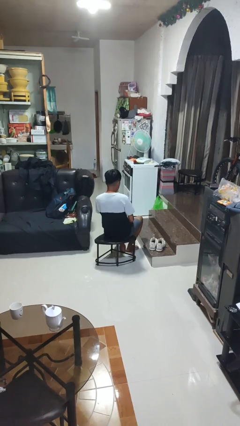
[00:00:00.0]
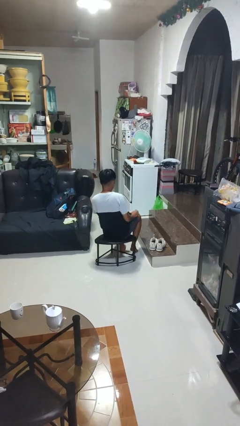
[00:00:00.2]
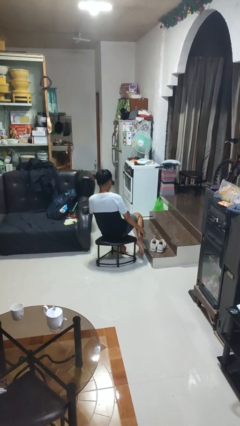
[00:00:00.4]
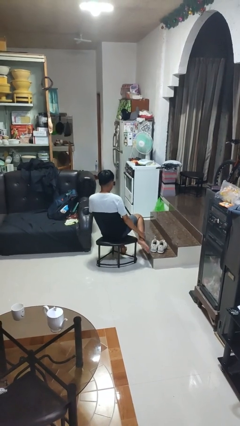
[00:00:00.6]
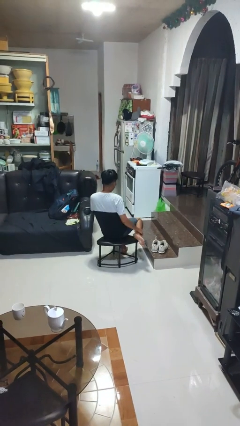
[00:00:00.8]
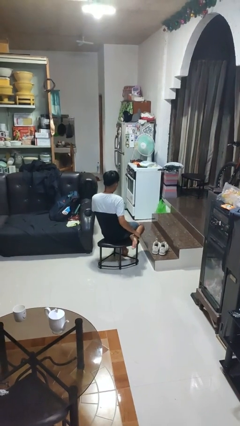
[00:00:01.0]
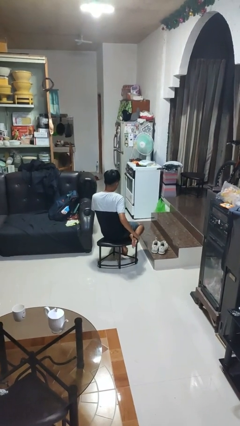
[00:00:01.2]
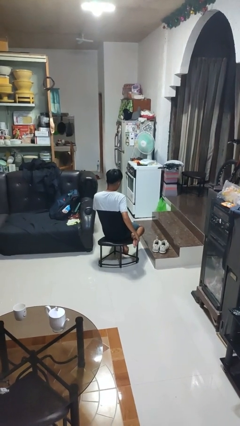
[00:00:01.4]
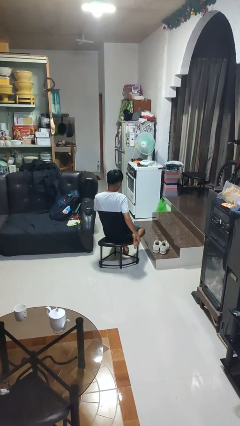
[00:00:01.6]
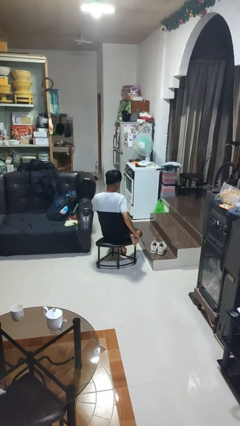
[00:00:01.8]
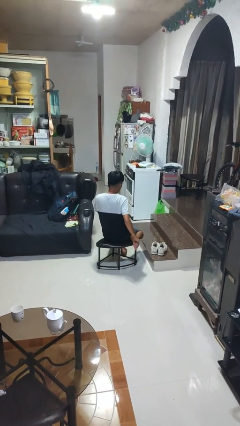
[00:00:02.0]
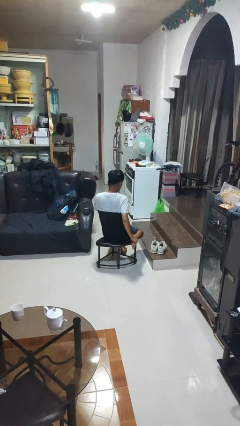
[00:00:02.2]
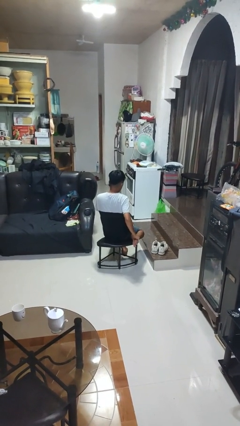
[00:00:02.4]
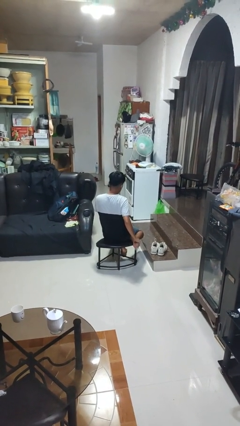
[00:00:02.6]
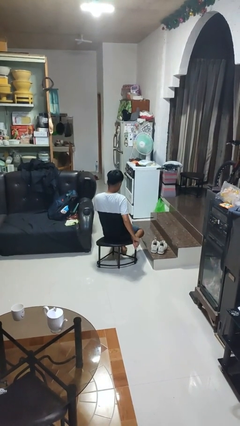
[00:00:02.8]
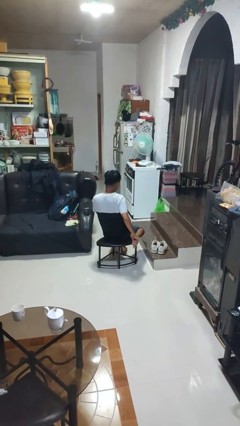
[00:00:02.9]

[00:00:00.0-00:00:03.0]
person rubs foot

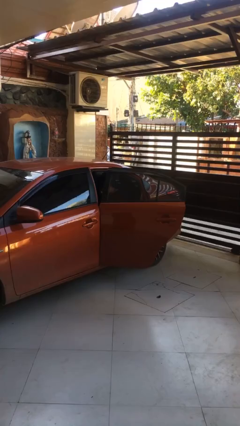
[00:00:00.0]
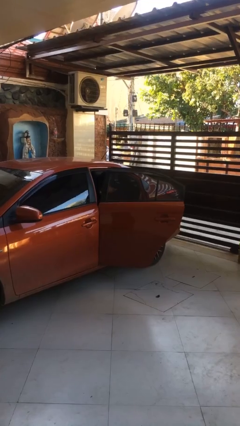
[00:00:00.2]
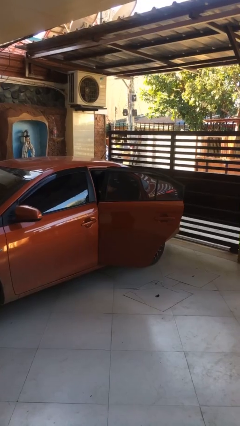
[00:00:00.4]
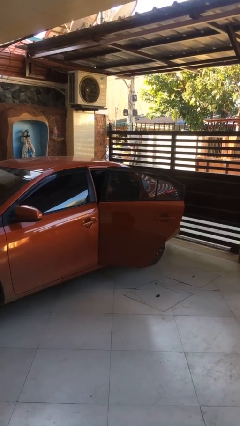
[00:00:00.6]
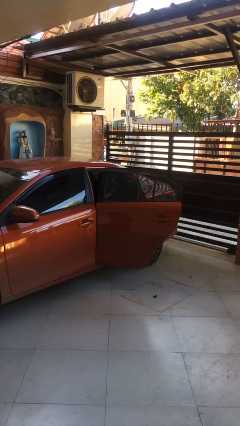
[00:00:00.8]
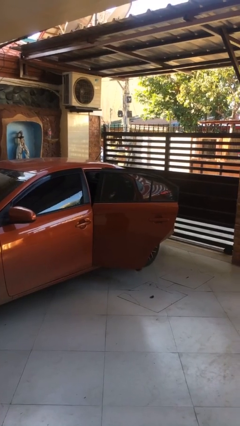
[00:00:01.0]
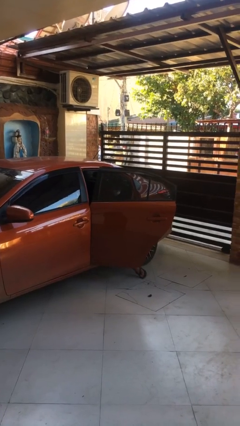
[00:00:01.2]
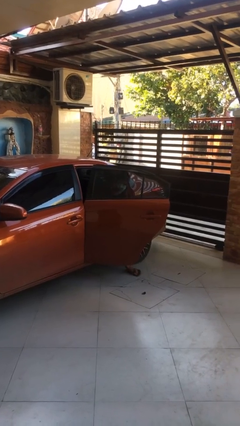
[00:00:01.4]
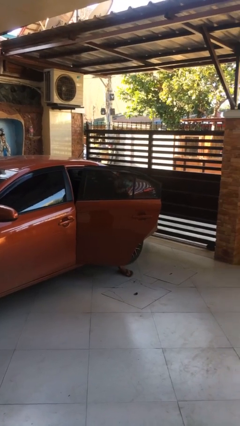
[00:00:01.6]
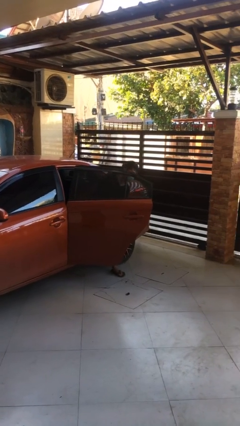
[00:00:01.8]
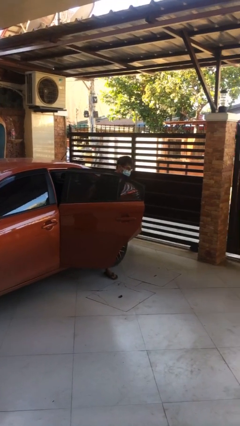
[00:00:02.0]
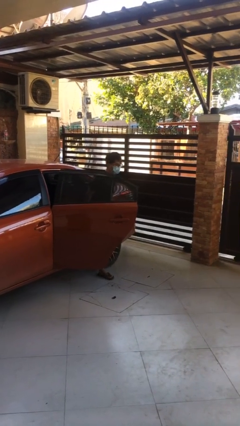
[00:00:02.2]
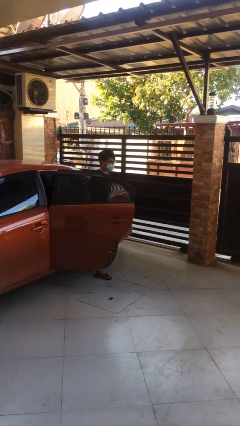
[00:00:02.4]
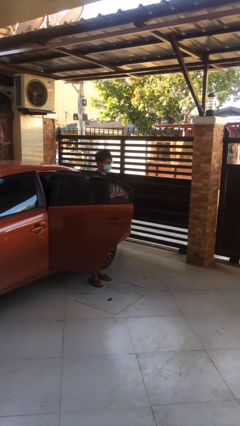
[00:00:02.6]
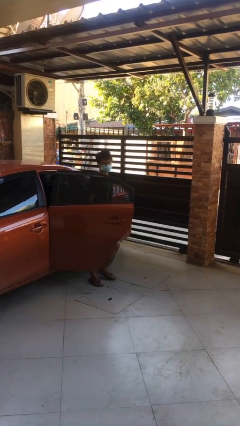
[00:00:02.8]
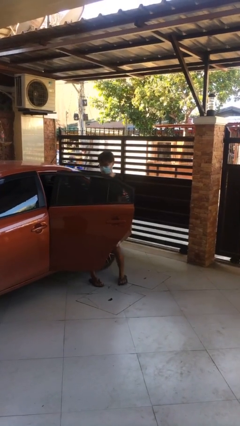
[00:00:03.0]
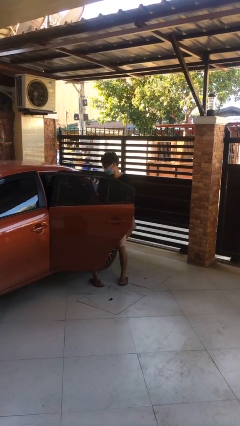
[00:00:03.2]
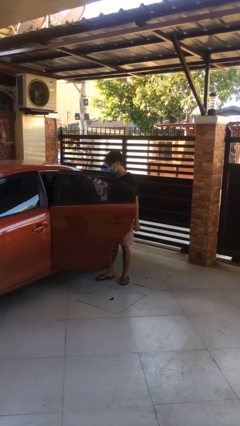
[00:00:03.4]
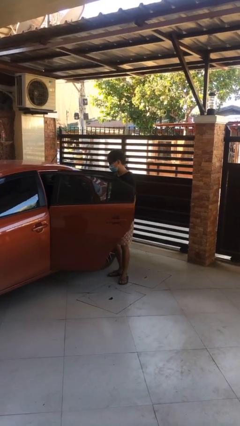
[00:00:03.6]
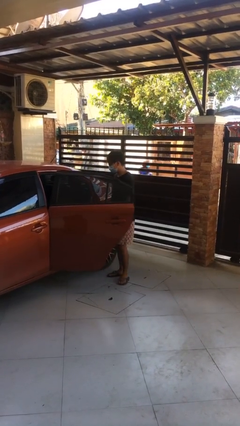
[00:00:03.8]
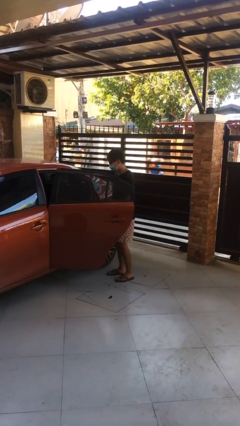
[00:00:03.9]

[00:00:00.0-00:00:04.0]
person exits car

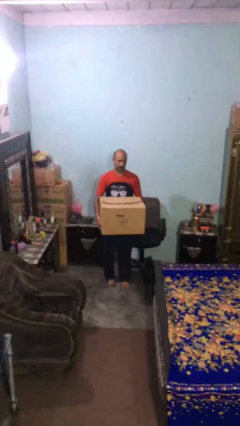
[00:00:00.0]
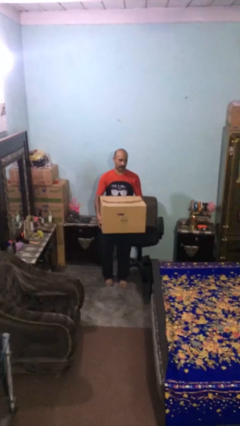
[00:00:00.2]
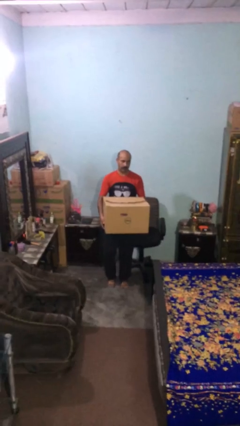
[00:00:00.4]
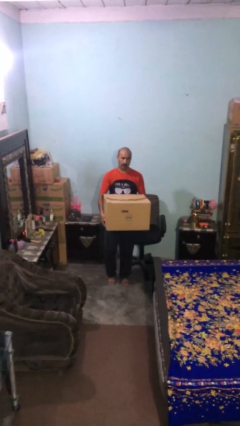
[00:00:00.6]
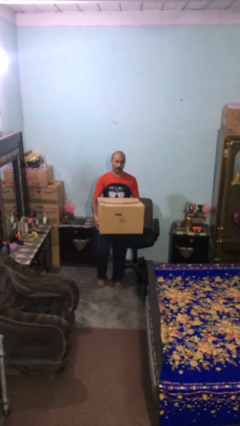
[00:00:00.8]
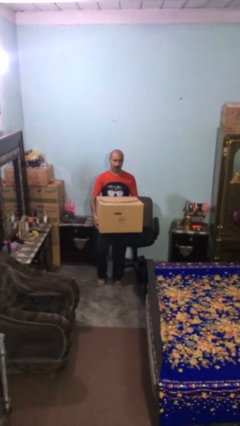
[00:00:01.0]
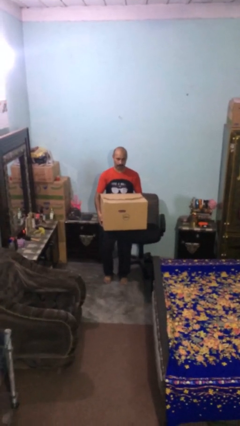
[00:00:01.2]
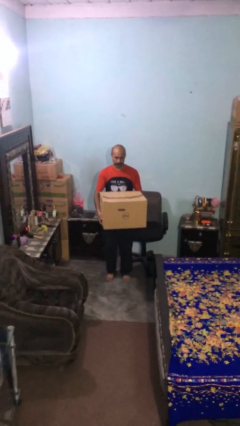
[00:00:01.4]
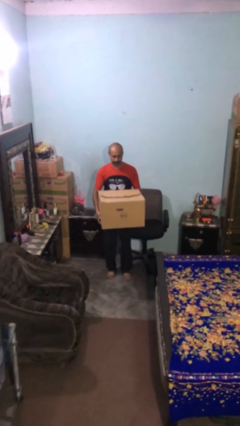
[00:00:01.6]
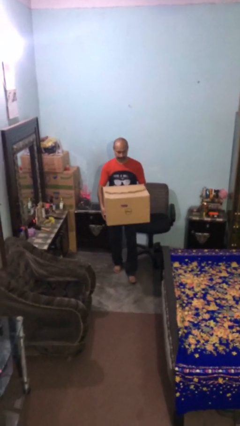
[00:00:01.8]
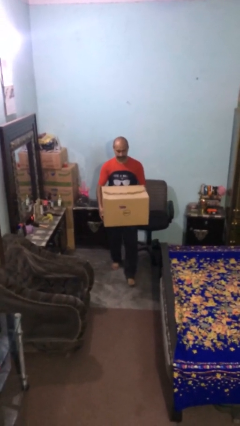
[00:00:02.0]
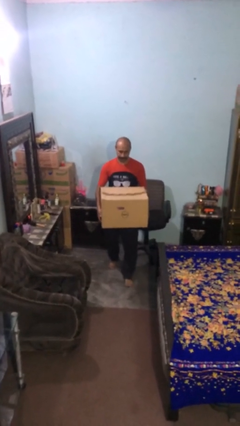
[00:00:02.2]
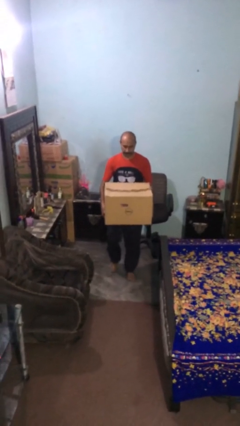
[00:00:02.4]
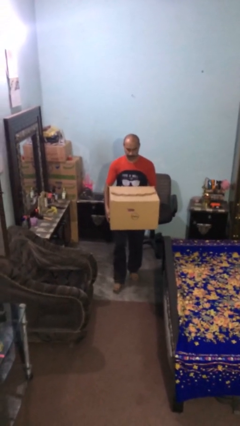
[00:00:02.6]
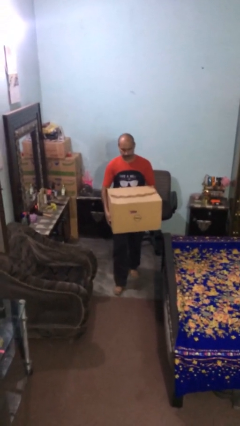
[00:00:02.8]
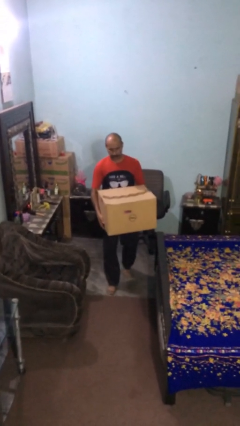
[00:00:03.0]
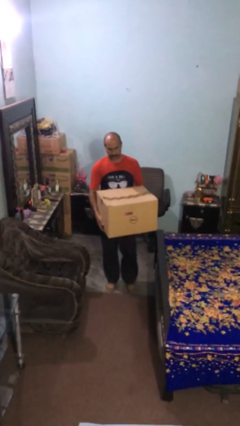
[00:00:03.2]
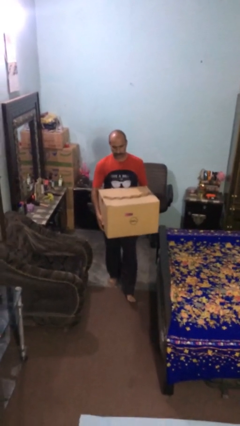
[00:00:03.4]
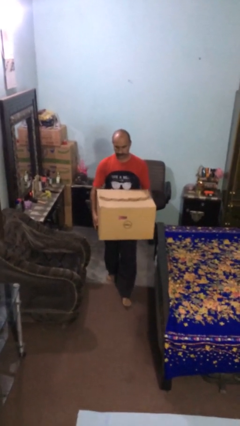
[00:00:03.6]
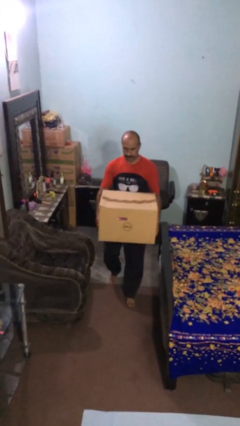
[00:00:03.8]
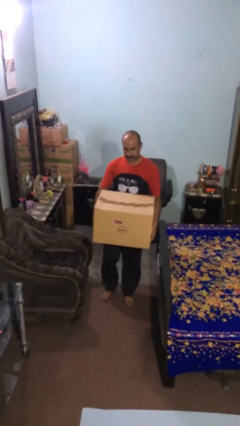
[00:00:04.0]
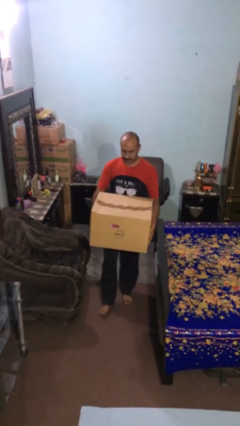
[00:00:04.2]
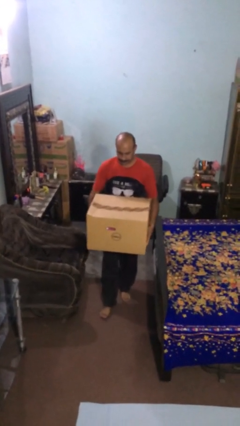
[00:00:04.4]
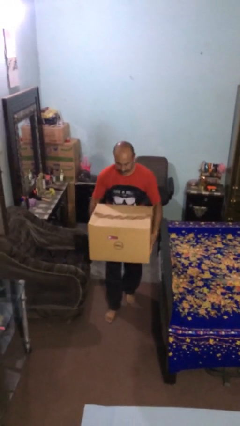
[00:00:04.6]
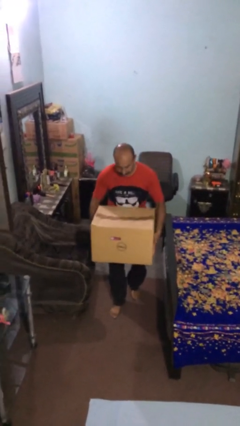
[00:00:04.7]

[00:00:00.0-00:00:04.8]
person carries heavy object

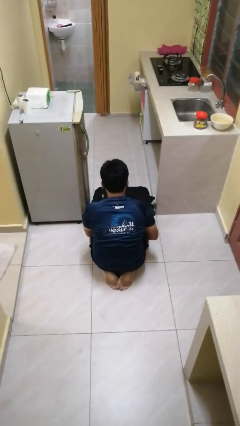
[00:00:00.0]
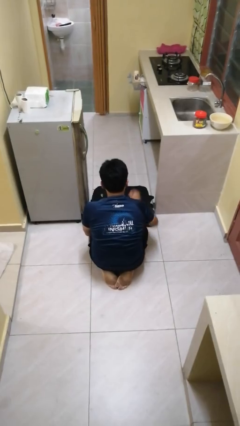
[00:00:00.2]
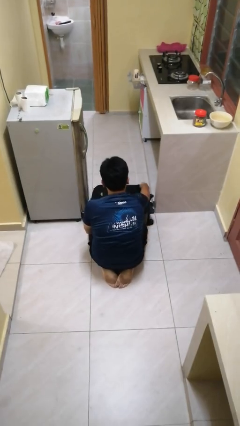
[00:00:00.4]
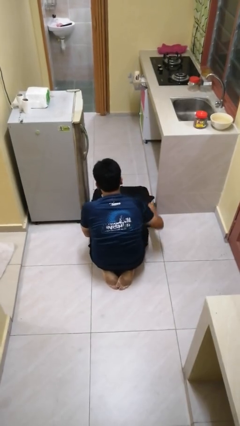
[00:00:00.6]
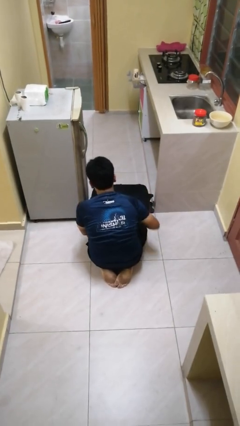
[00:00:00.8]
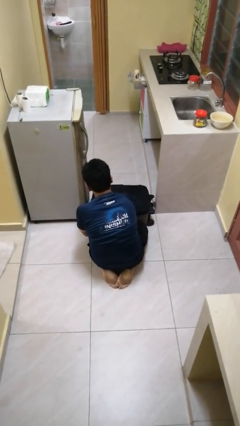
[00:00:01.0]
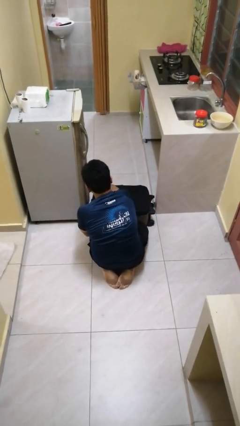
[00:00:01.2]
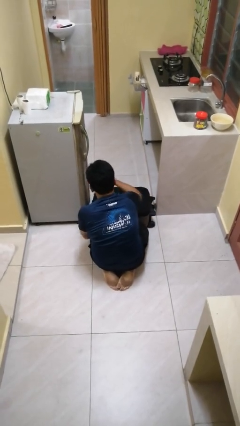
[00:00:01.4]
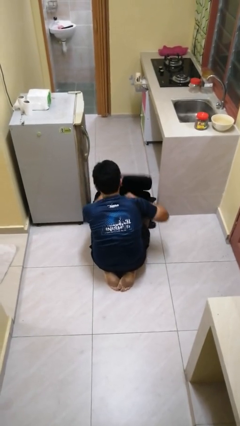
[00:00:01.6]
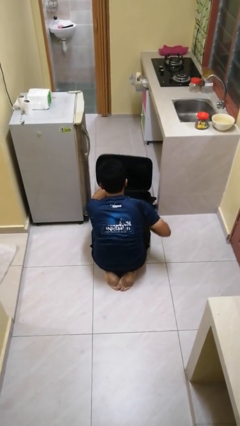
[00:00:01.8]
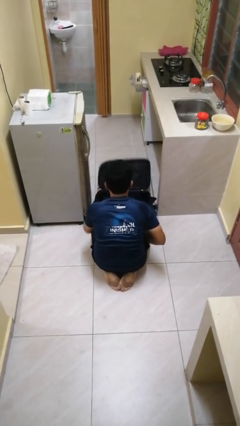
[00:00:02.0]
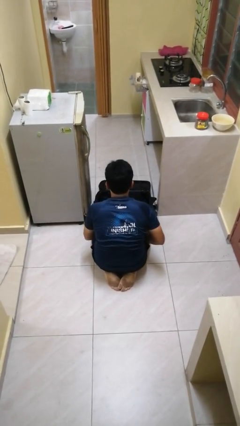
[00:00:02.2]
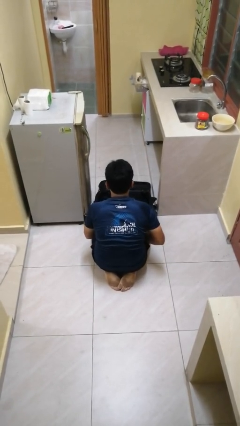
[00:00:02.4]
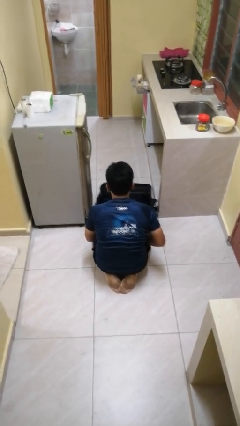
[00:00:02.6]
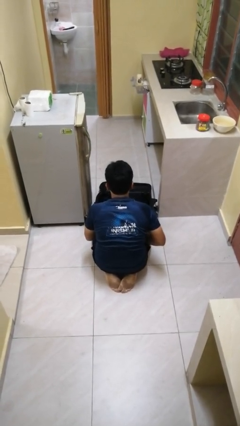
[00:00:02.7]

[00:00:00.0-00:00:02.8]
person opens suitcase

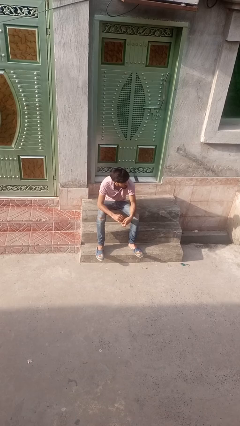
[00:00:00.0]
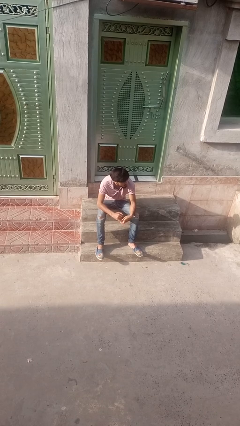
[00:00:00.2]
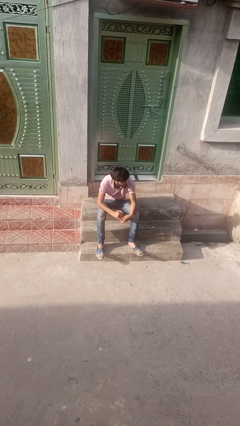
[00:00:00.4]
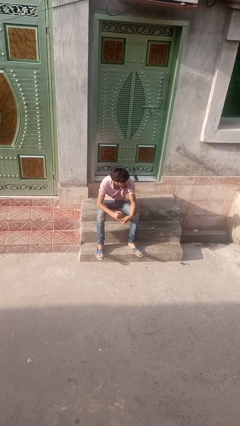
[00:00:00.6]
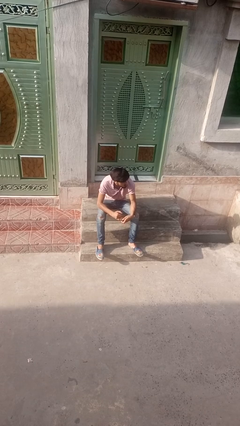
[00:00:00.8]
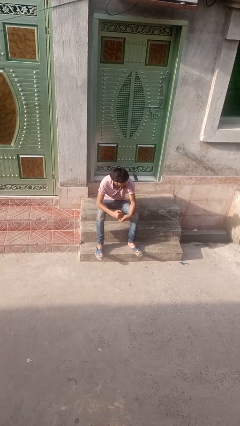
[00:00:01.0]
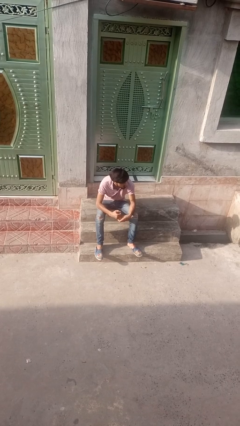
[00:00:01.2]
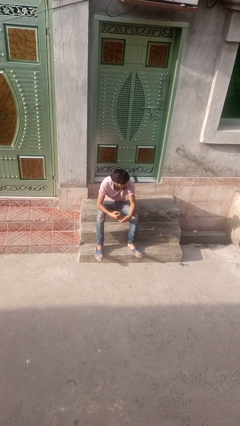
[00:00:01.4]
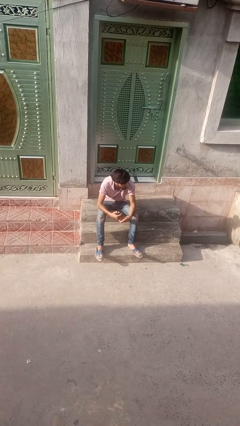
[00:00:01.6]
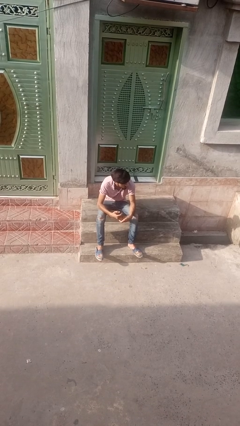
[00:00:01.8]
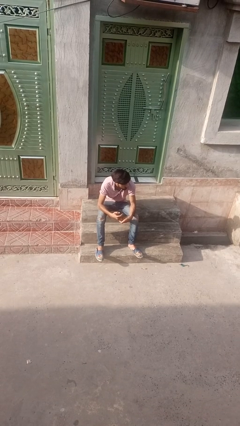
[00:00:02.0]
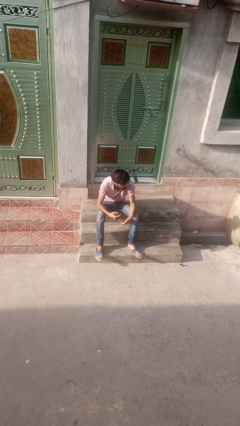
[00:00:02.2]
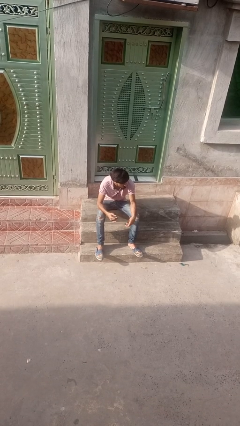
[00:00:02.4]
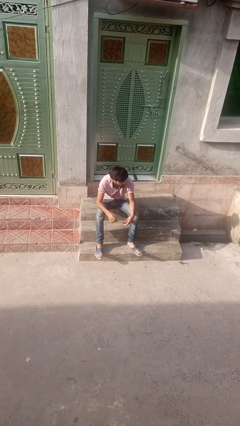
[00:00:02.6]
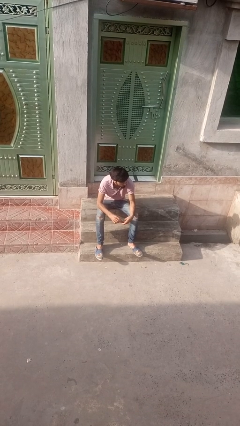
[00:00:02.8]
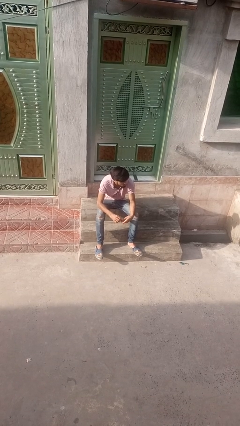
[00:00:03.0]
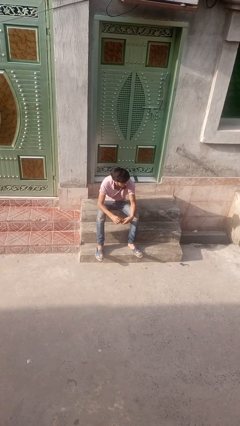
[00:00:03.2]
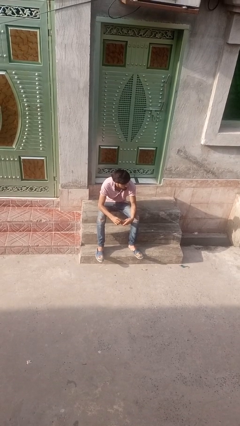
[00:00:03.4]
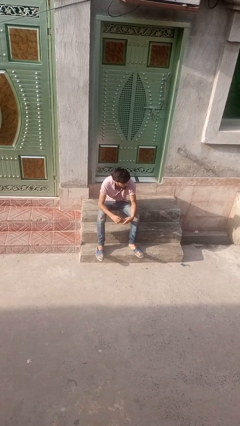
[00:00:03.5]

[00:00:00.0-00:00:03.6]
person takes off ring
